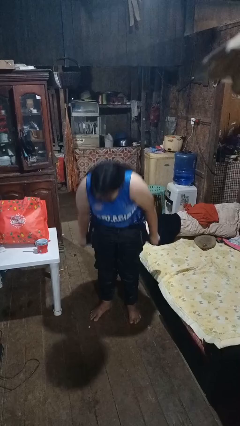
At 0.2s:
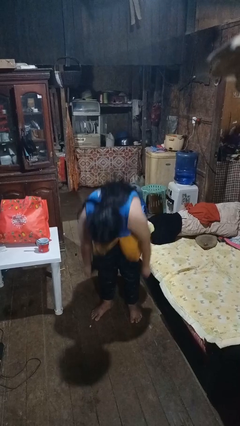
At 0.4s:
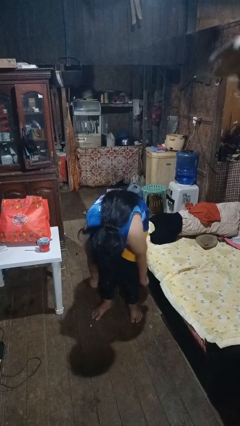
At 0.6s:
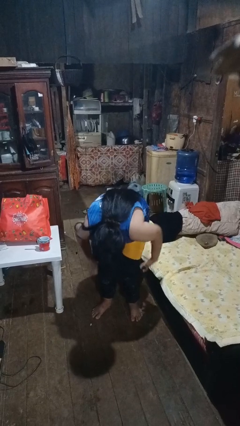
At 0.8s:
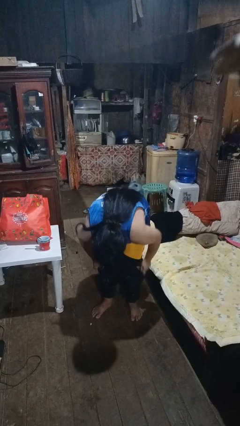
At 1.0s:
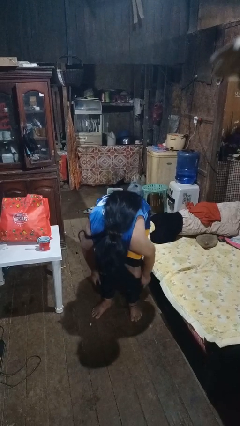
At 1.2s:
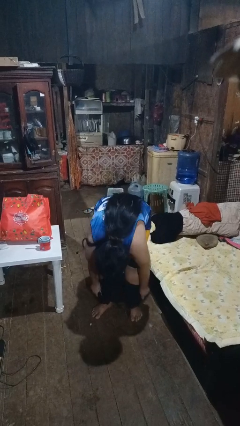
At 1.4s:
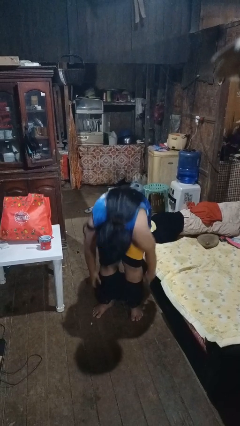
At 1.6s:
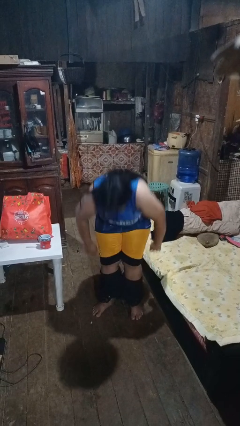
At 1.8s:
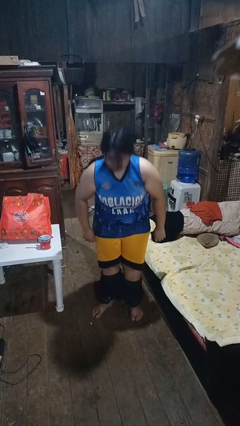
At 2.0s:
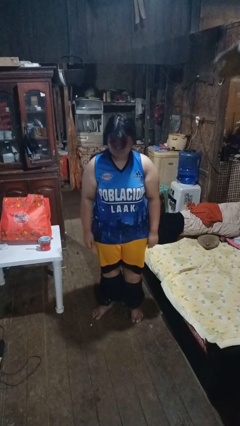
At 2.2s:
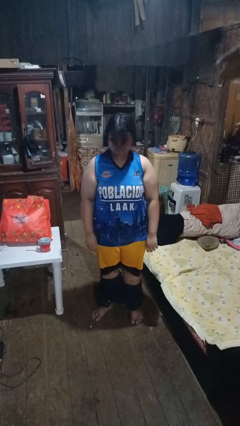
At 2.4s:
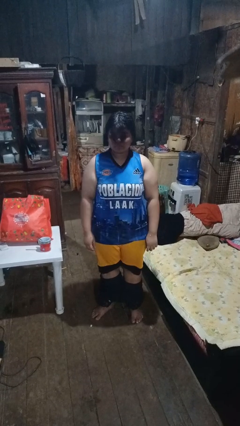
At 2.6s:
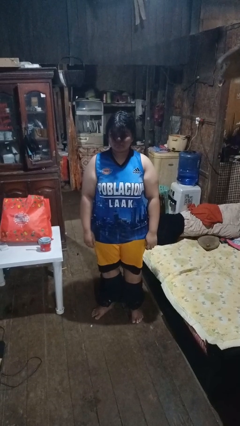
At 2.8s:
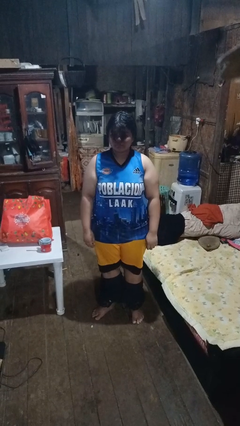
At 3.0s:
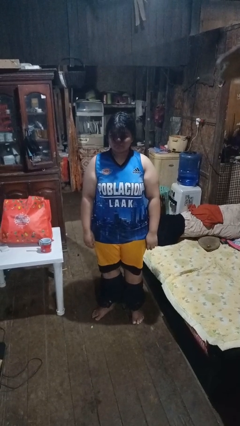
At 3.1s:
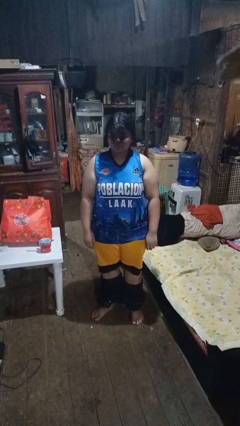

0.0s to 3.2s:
person takes off pants

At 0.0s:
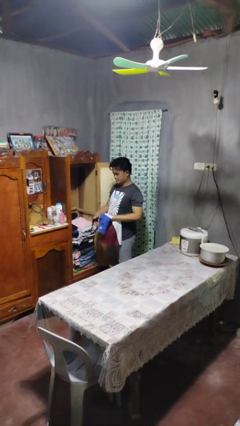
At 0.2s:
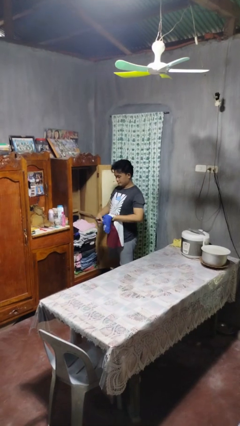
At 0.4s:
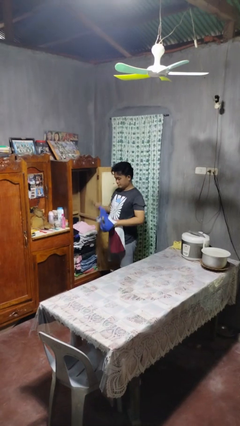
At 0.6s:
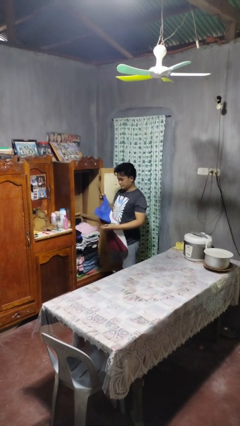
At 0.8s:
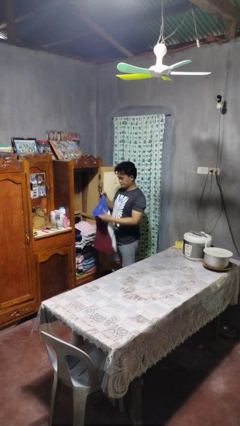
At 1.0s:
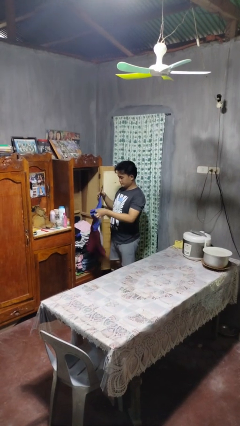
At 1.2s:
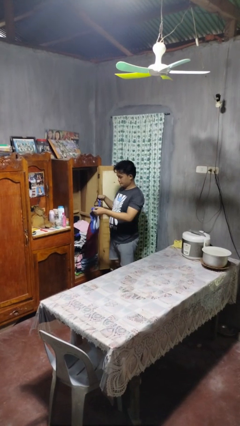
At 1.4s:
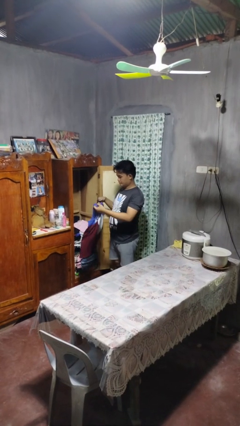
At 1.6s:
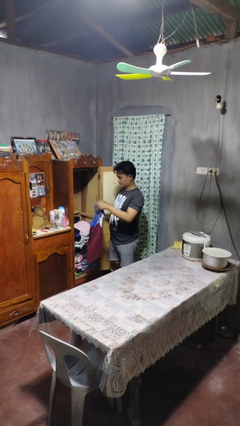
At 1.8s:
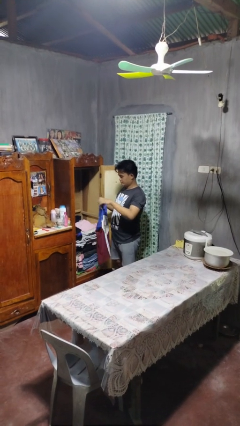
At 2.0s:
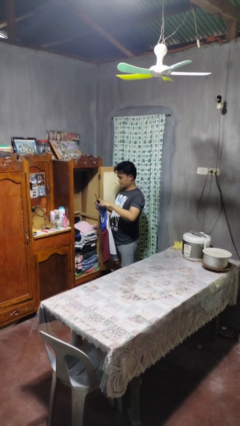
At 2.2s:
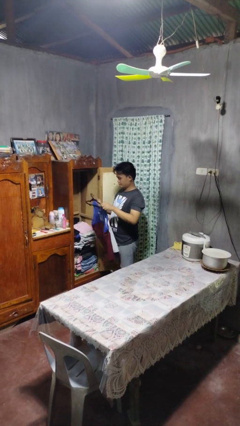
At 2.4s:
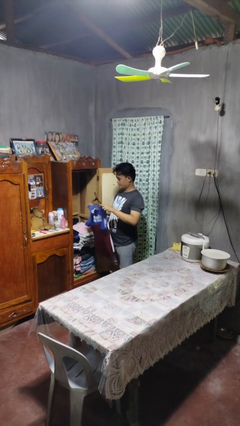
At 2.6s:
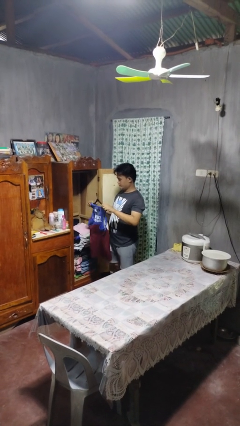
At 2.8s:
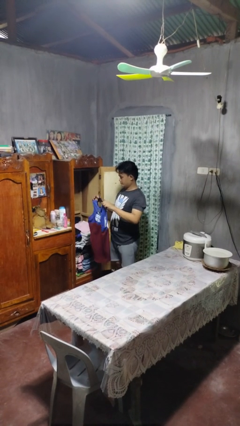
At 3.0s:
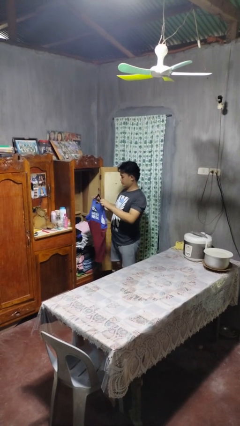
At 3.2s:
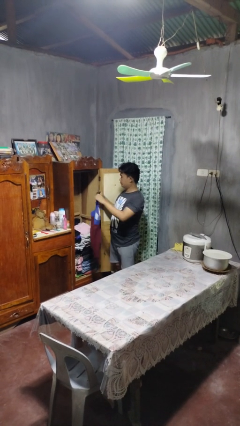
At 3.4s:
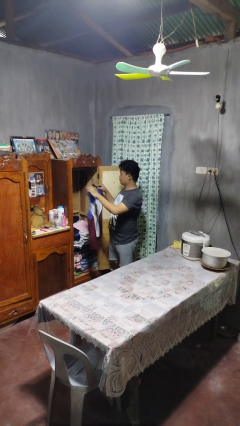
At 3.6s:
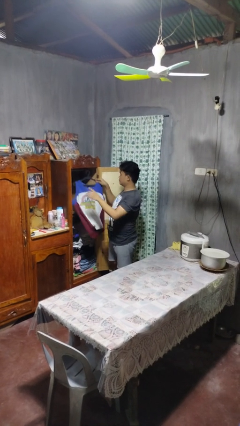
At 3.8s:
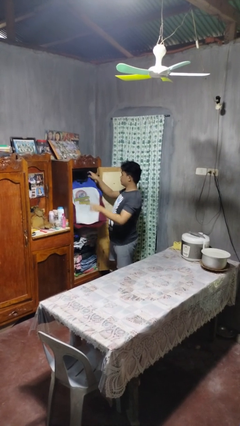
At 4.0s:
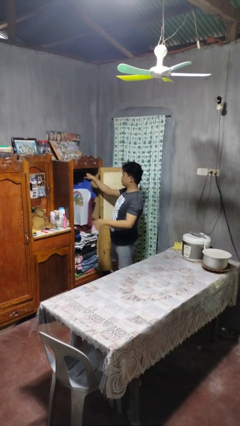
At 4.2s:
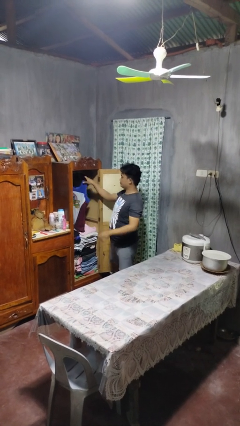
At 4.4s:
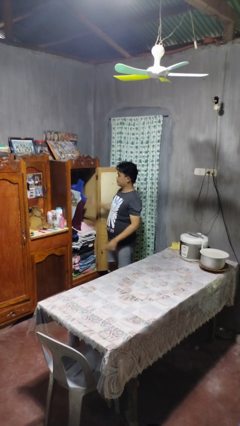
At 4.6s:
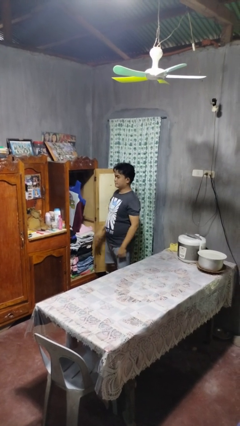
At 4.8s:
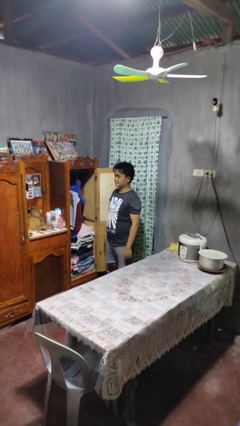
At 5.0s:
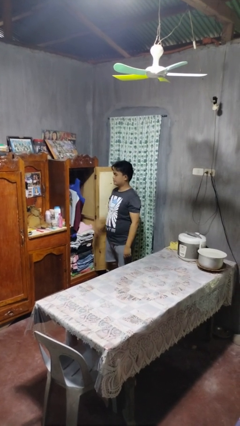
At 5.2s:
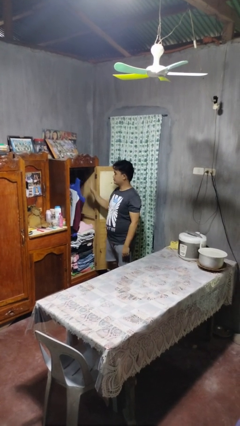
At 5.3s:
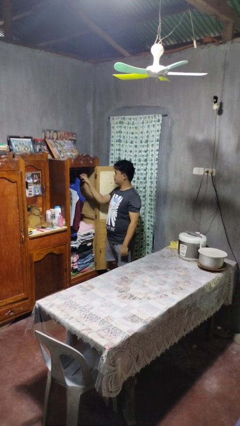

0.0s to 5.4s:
person puts clothes into closet

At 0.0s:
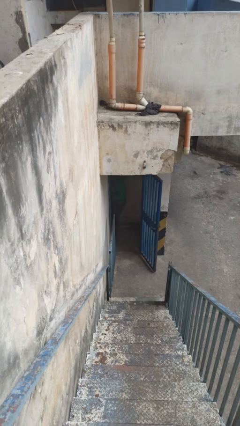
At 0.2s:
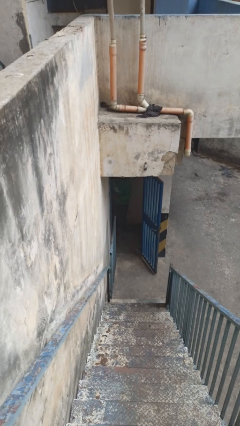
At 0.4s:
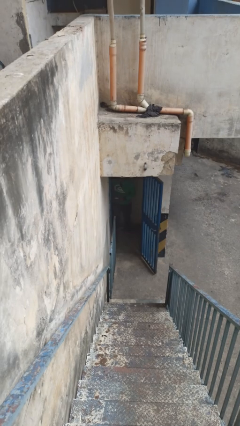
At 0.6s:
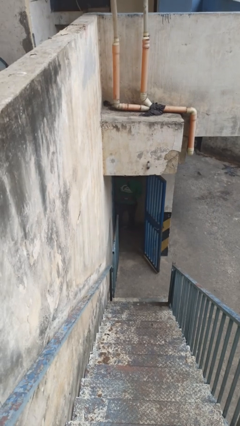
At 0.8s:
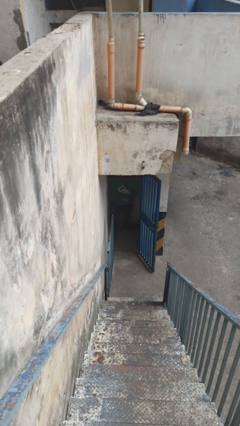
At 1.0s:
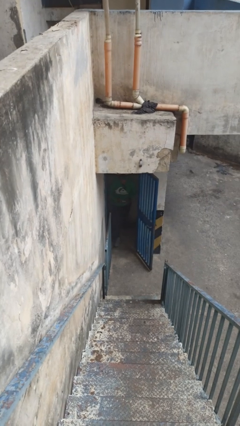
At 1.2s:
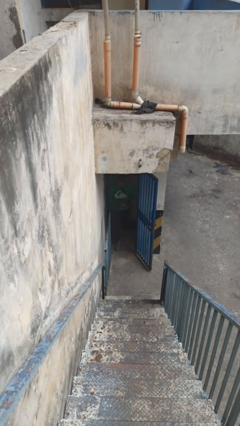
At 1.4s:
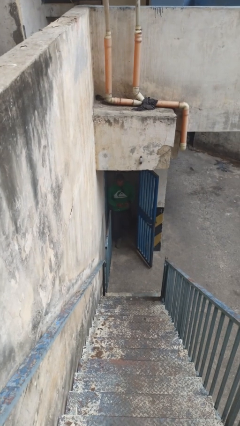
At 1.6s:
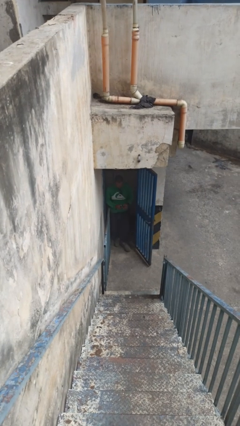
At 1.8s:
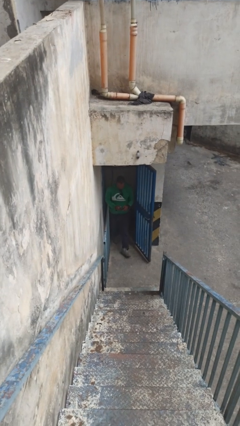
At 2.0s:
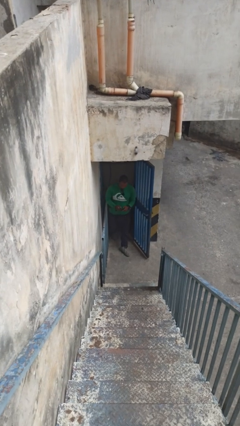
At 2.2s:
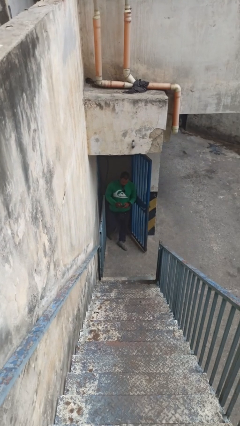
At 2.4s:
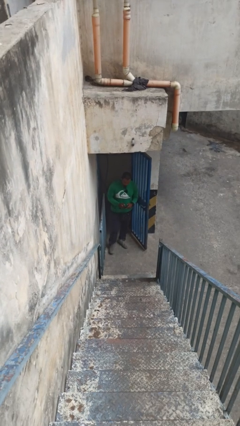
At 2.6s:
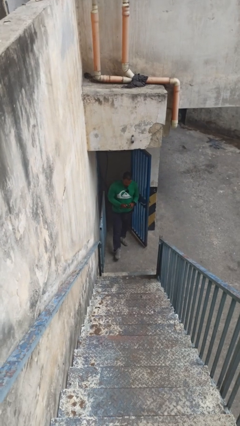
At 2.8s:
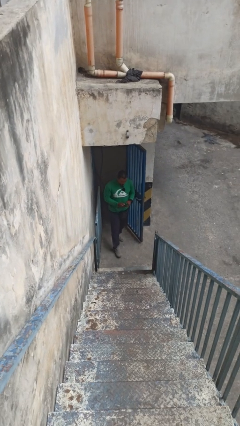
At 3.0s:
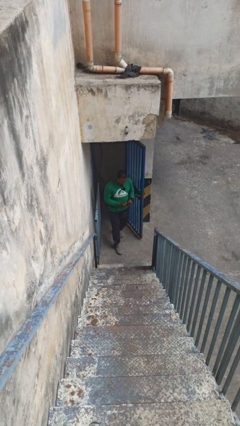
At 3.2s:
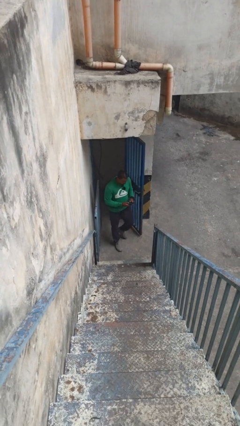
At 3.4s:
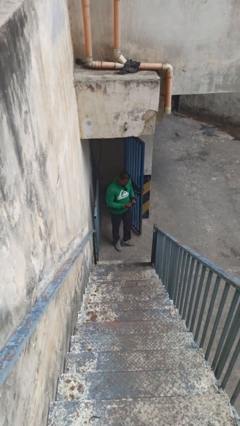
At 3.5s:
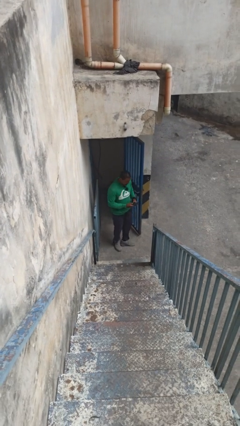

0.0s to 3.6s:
person enters scene through structure

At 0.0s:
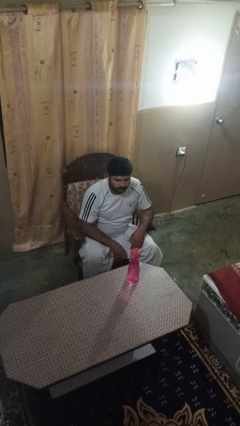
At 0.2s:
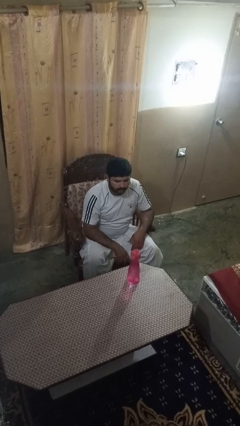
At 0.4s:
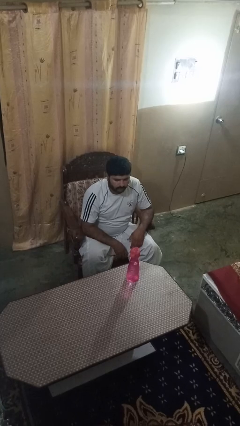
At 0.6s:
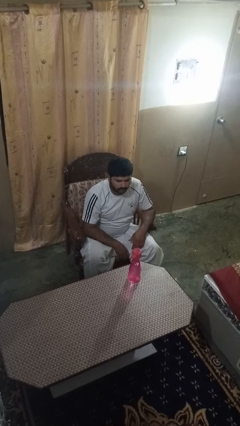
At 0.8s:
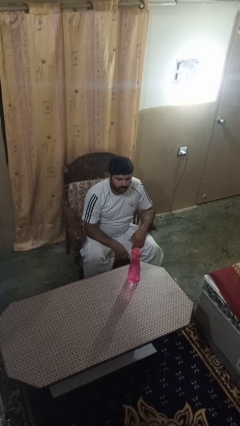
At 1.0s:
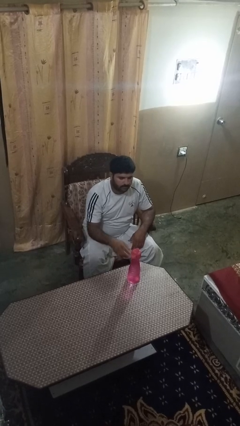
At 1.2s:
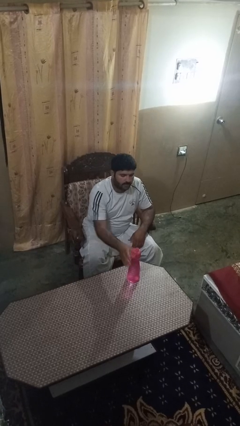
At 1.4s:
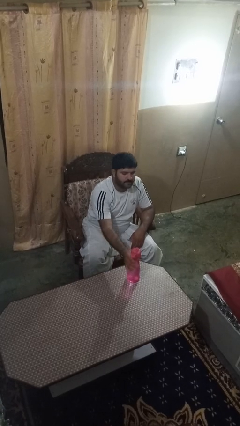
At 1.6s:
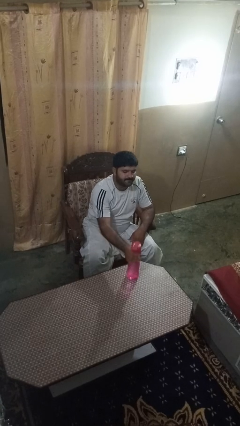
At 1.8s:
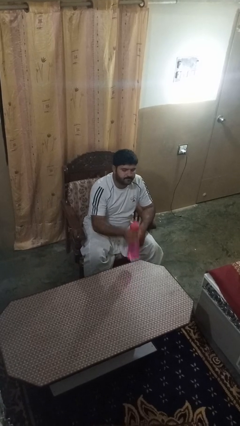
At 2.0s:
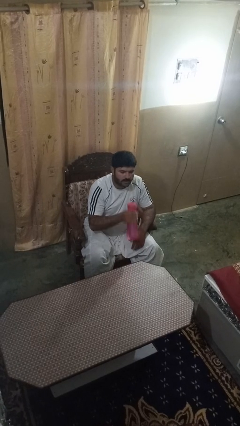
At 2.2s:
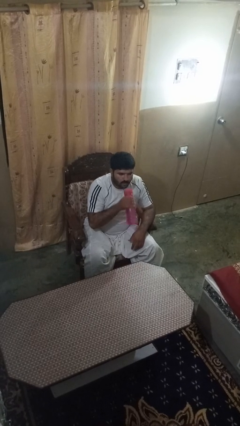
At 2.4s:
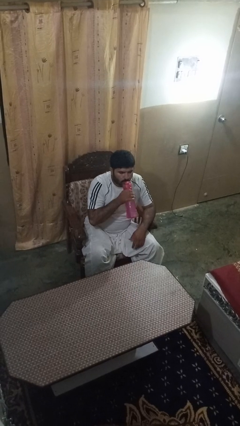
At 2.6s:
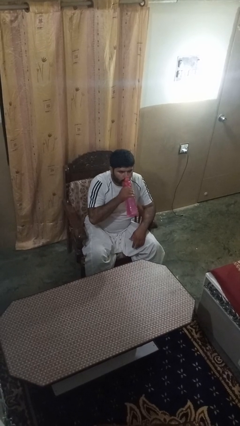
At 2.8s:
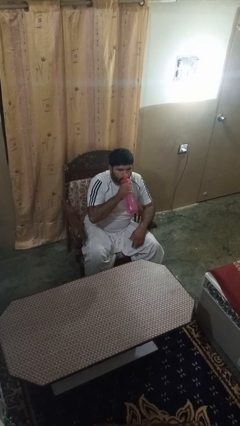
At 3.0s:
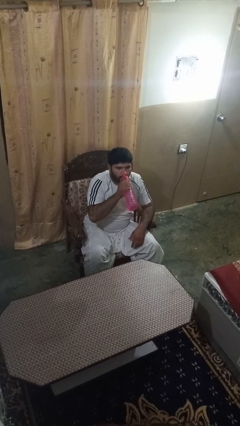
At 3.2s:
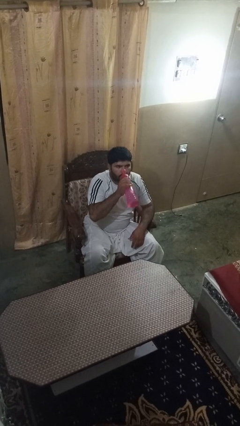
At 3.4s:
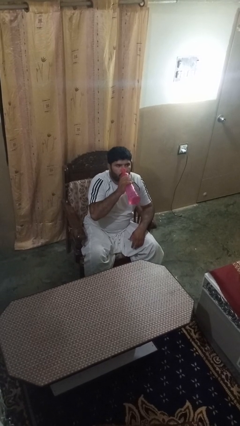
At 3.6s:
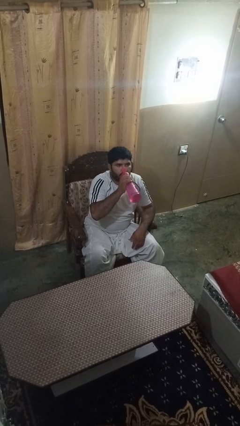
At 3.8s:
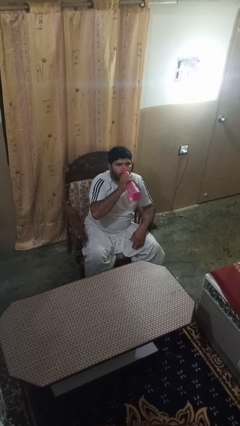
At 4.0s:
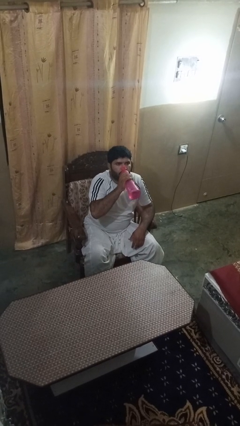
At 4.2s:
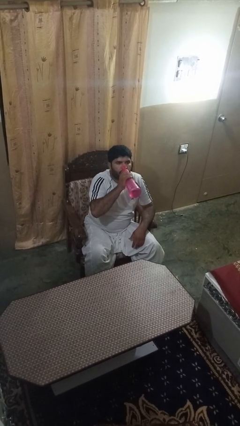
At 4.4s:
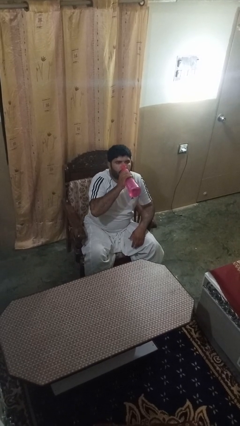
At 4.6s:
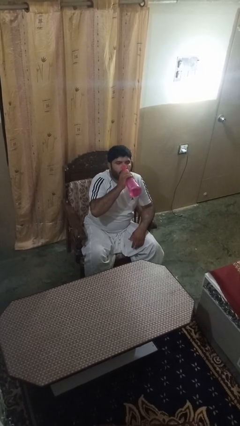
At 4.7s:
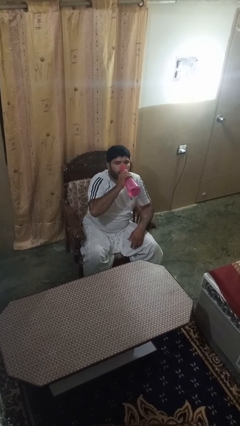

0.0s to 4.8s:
person drinks from bottle

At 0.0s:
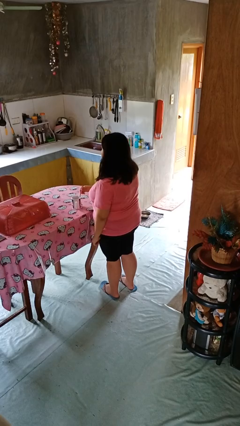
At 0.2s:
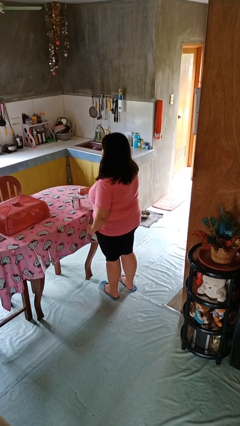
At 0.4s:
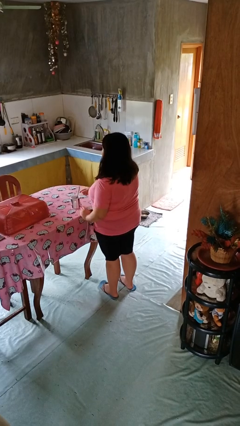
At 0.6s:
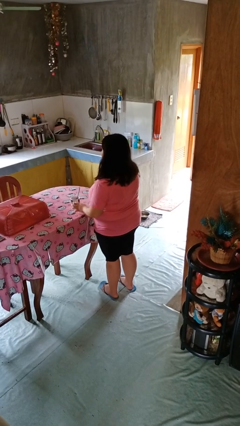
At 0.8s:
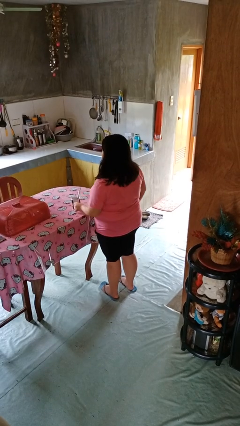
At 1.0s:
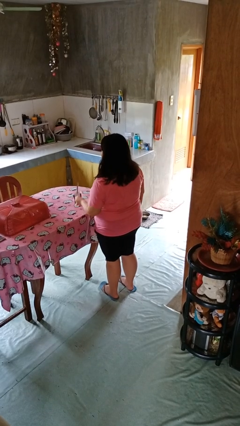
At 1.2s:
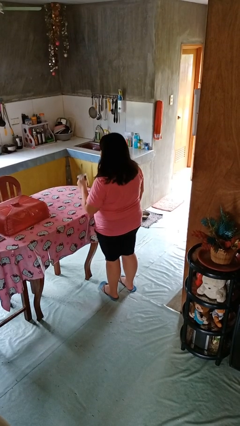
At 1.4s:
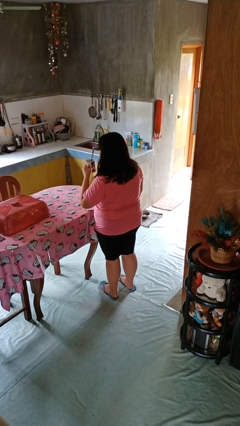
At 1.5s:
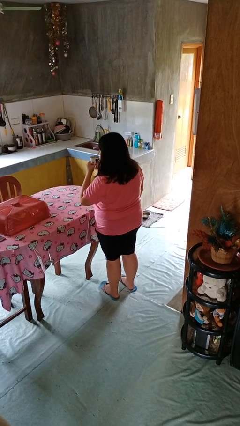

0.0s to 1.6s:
person stirs mug
